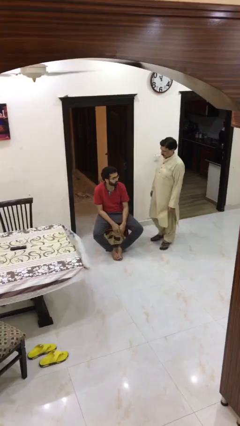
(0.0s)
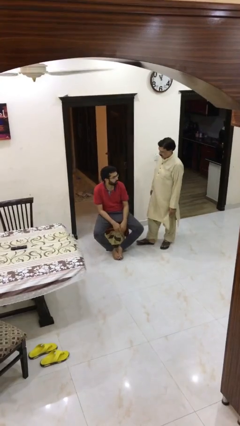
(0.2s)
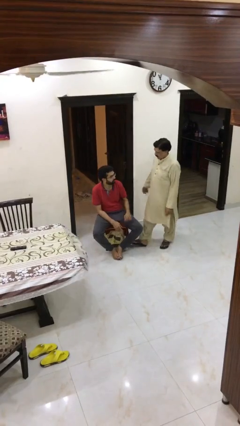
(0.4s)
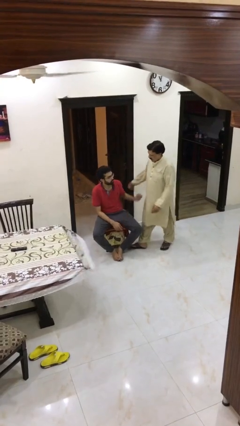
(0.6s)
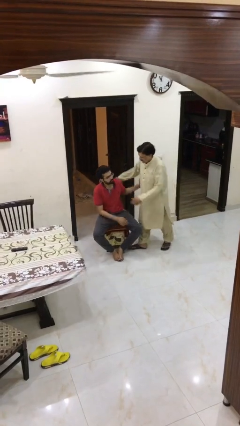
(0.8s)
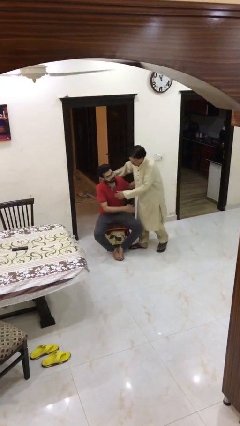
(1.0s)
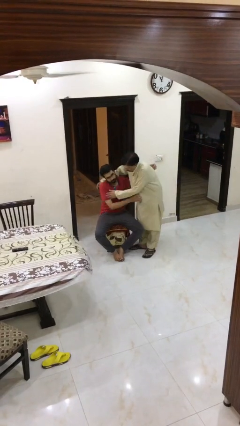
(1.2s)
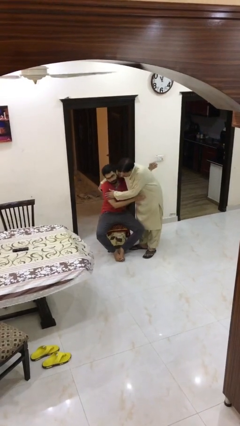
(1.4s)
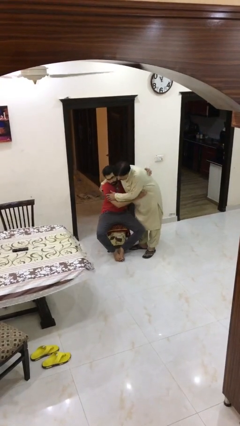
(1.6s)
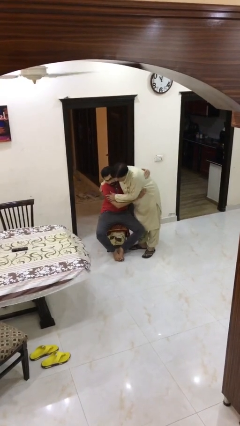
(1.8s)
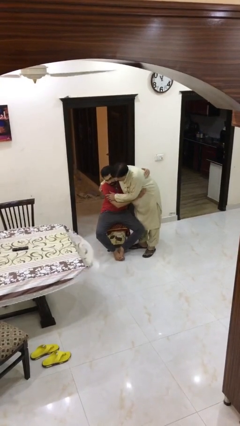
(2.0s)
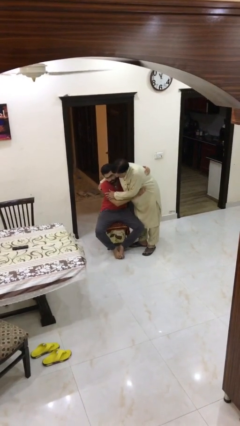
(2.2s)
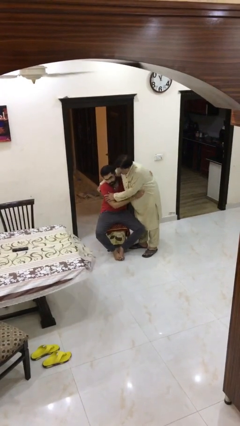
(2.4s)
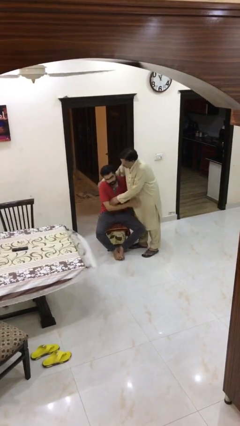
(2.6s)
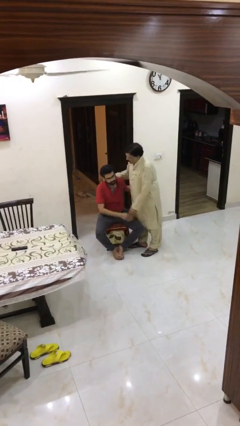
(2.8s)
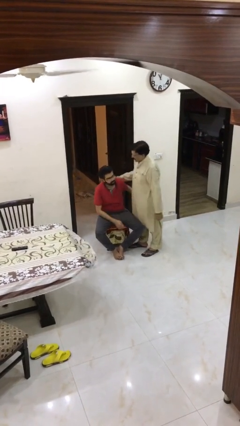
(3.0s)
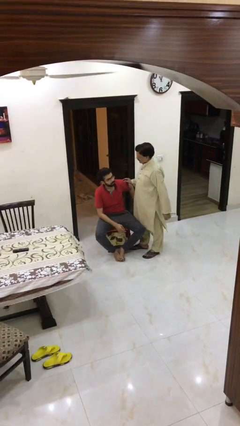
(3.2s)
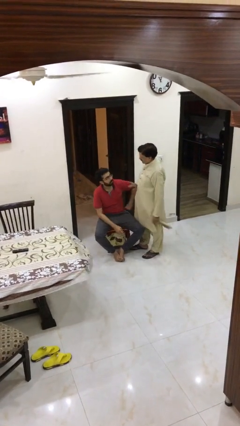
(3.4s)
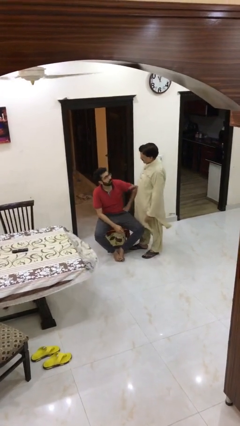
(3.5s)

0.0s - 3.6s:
person embraces person

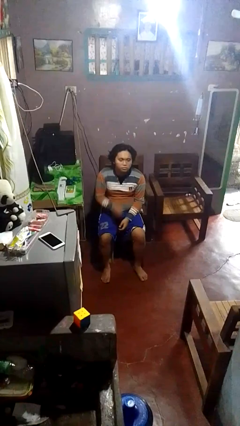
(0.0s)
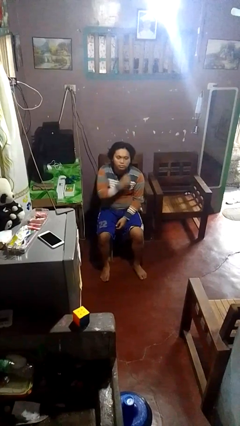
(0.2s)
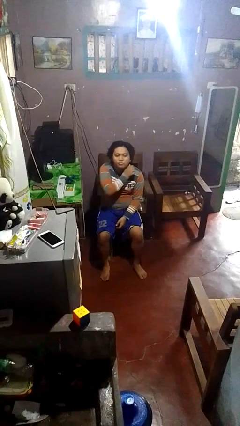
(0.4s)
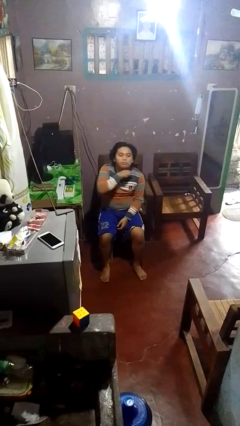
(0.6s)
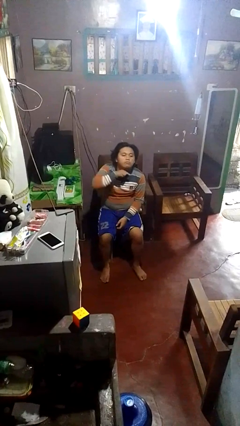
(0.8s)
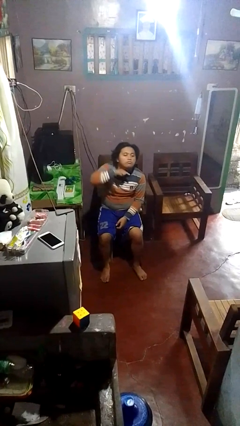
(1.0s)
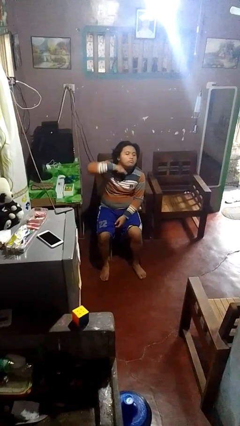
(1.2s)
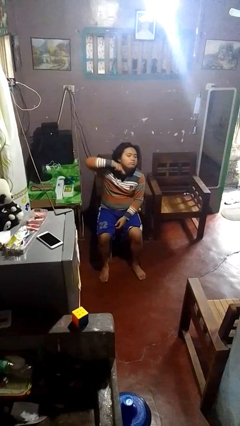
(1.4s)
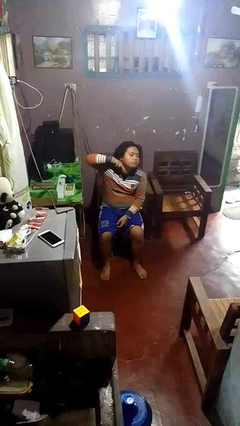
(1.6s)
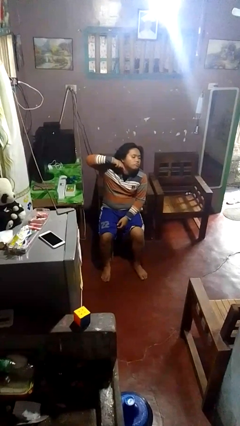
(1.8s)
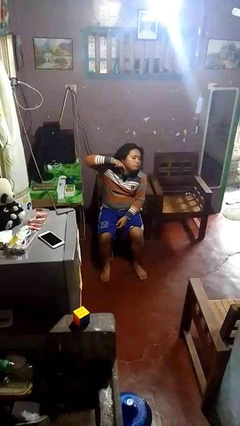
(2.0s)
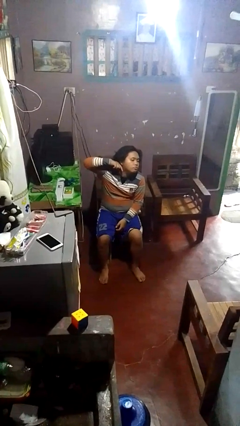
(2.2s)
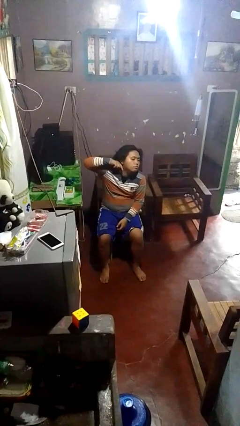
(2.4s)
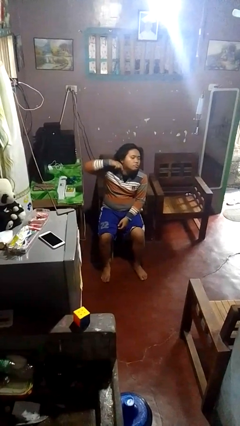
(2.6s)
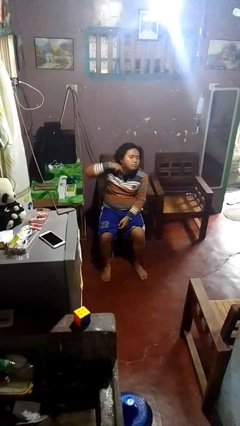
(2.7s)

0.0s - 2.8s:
person gestures cut

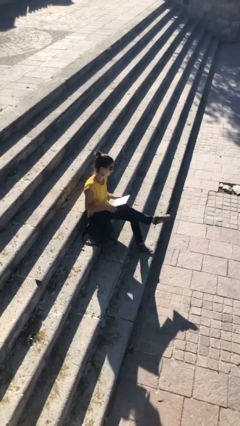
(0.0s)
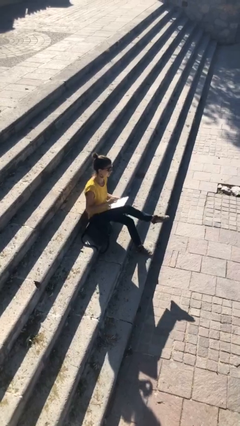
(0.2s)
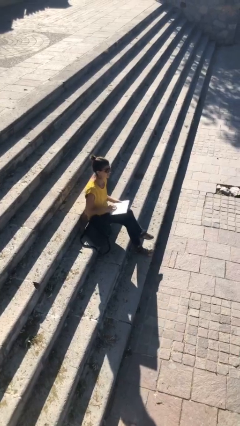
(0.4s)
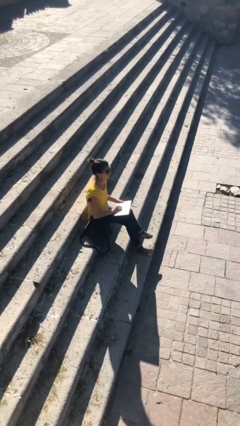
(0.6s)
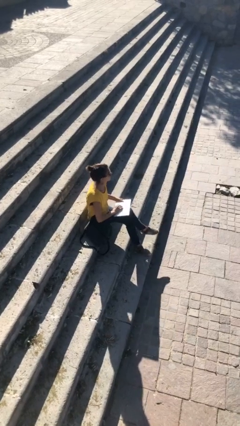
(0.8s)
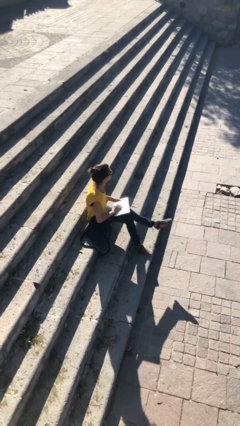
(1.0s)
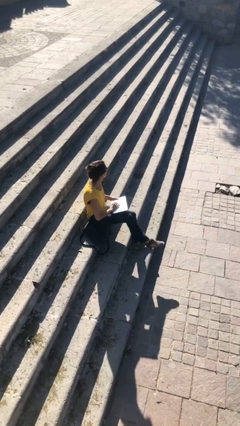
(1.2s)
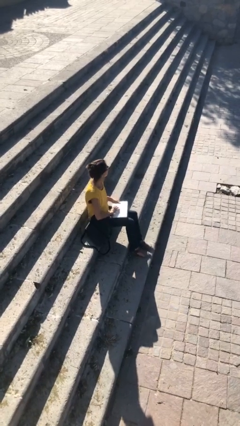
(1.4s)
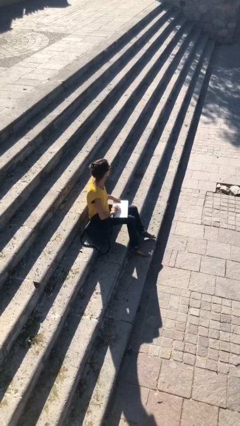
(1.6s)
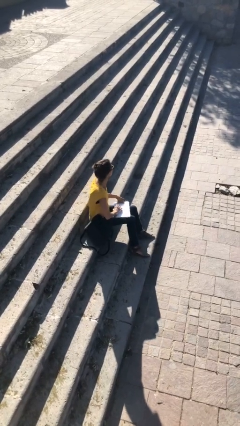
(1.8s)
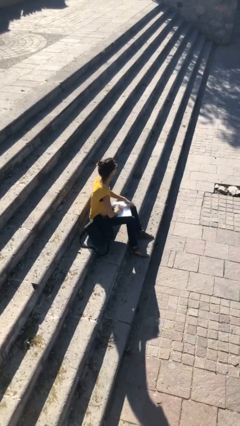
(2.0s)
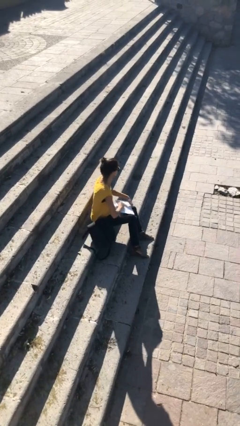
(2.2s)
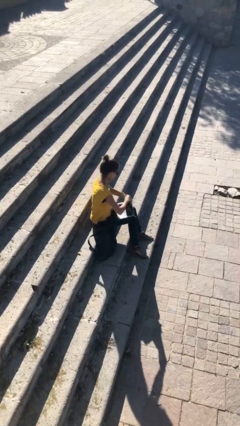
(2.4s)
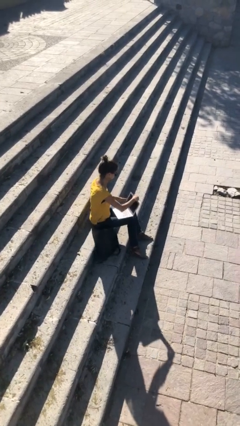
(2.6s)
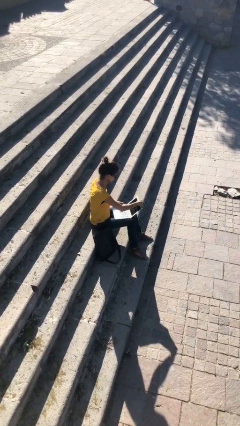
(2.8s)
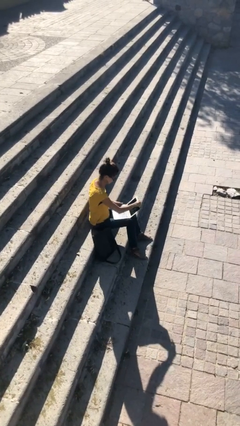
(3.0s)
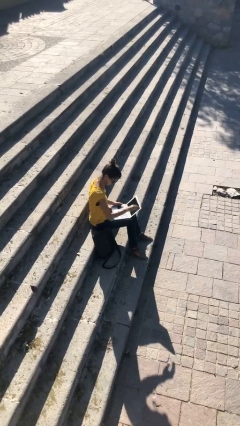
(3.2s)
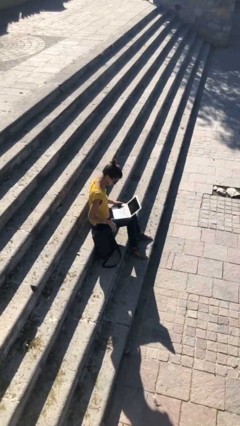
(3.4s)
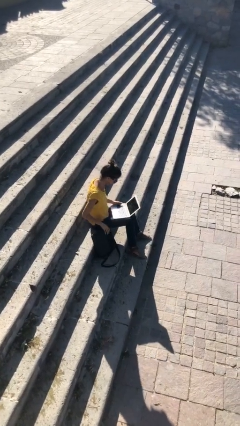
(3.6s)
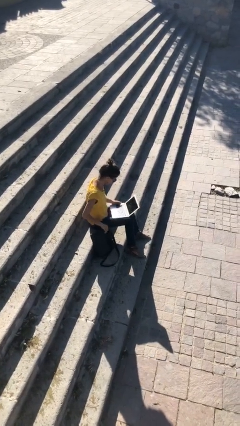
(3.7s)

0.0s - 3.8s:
person interacts with laptop

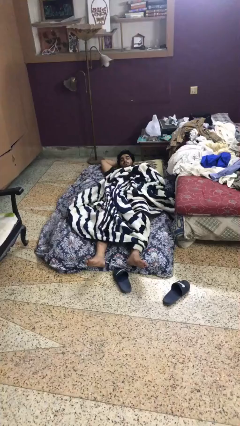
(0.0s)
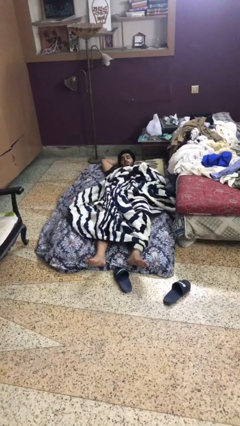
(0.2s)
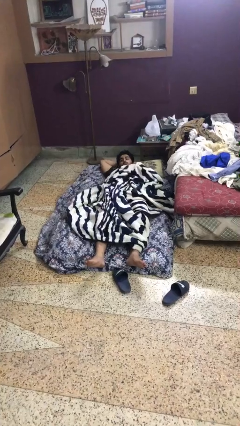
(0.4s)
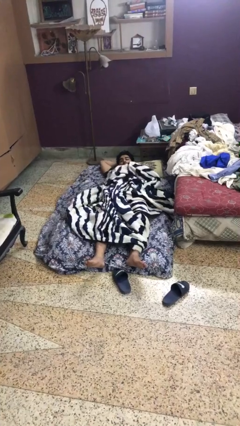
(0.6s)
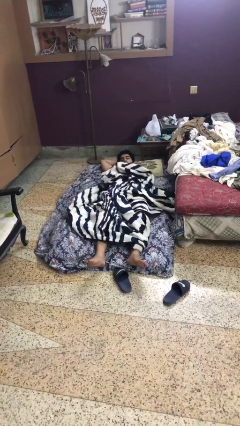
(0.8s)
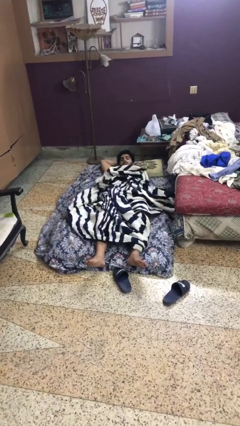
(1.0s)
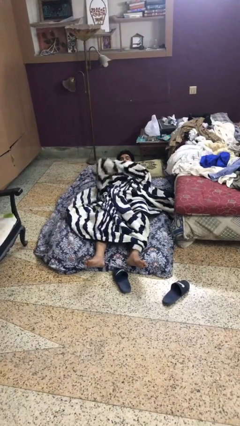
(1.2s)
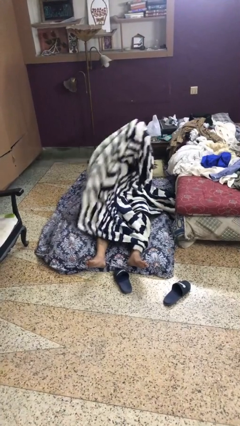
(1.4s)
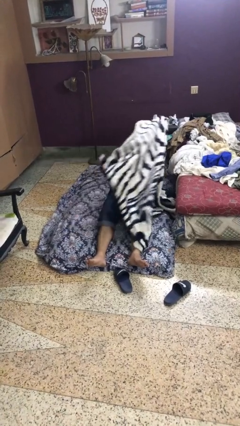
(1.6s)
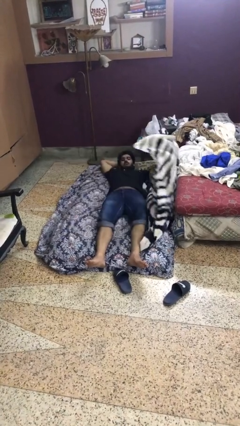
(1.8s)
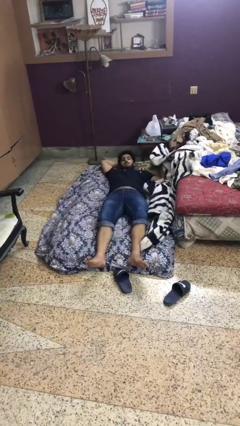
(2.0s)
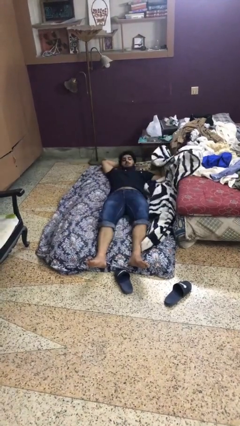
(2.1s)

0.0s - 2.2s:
person uncovers with blanket

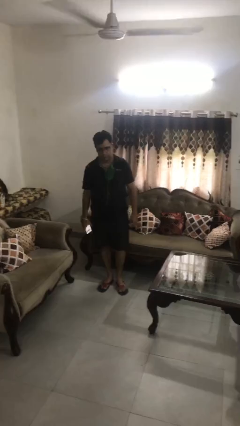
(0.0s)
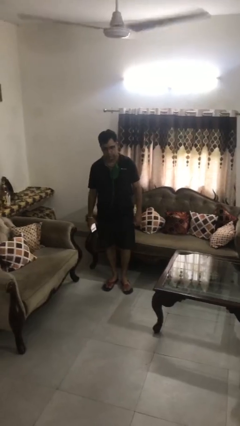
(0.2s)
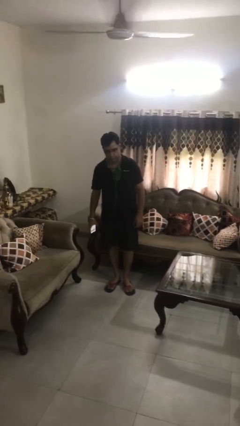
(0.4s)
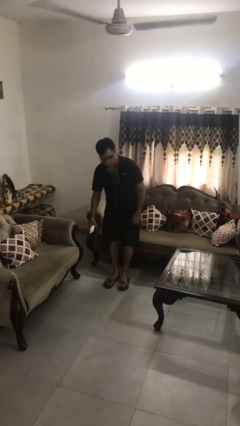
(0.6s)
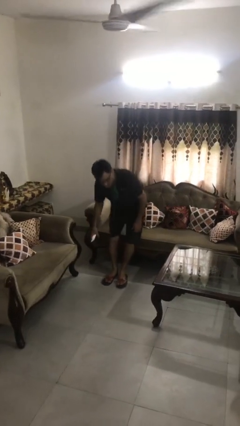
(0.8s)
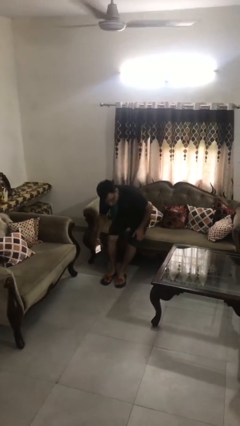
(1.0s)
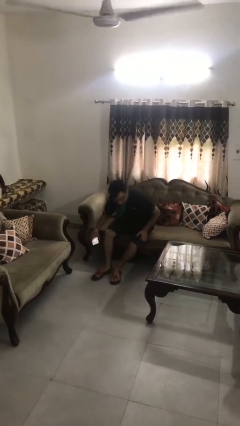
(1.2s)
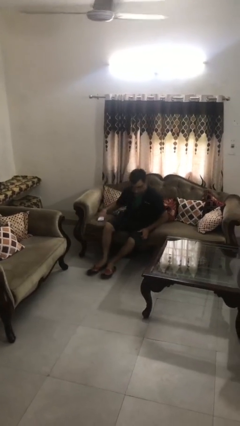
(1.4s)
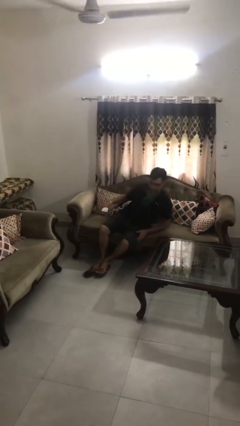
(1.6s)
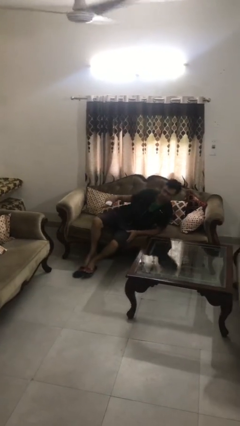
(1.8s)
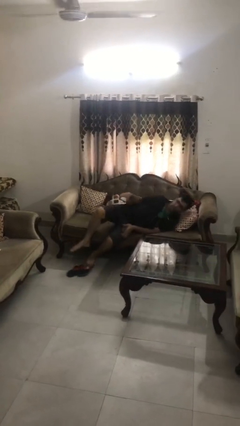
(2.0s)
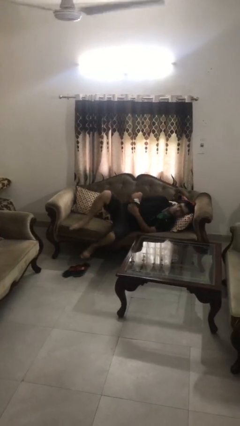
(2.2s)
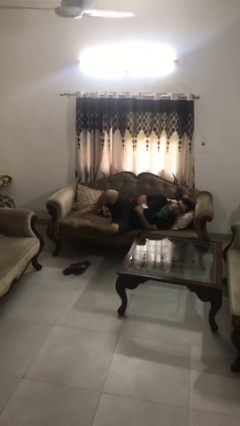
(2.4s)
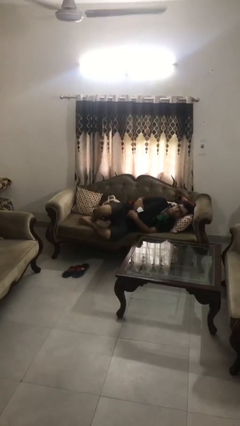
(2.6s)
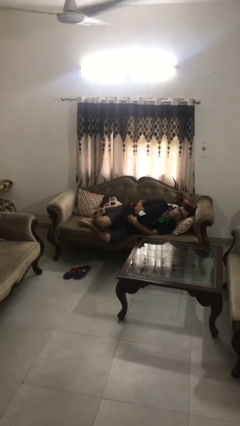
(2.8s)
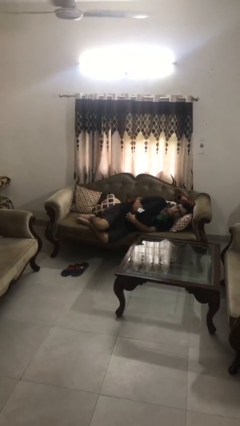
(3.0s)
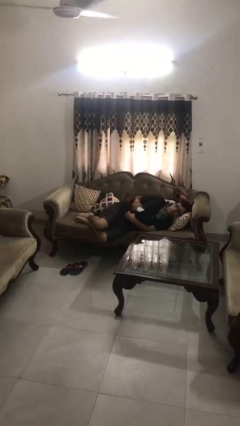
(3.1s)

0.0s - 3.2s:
person lies down on couch

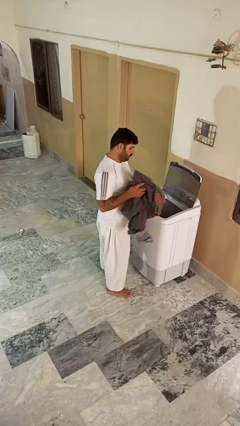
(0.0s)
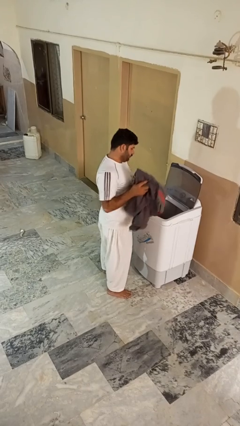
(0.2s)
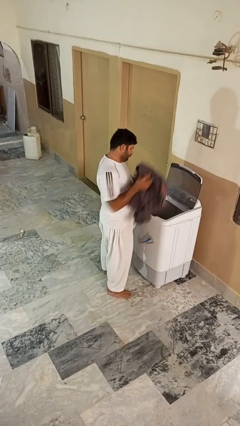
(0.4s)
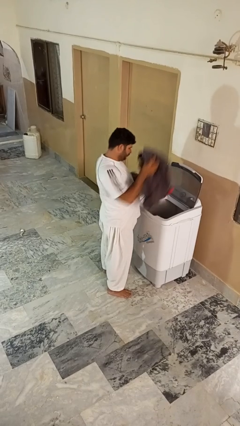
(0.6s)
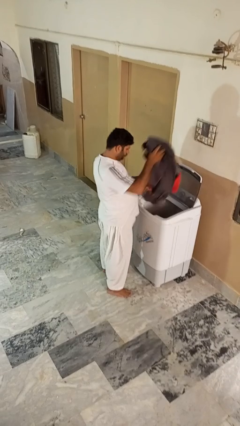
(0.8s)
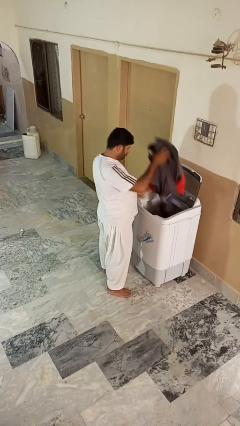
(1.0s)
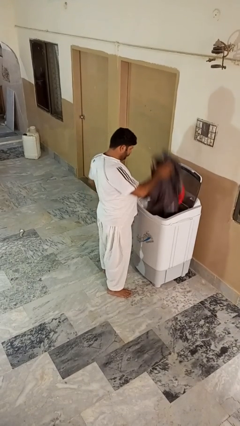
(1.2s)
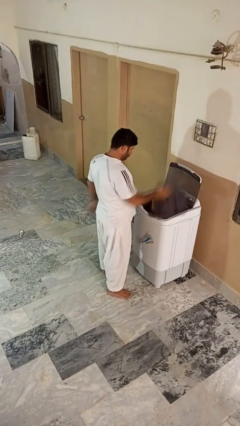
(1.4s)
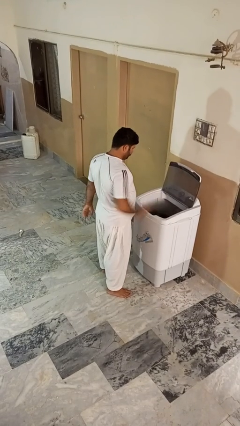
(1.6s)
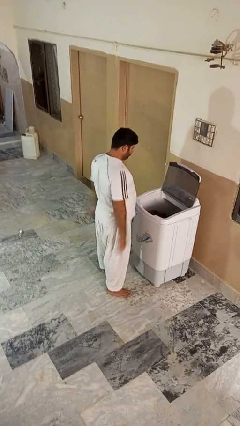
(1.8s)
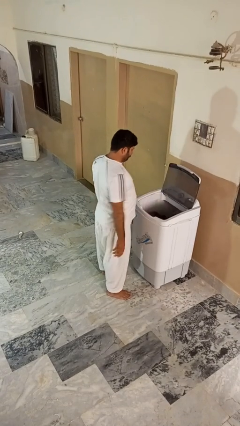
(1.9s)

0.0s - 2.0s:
person loads clotheswasher
